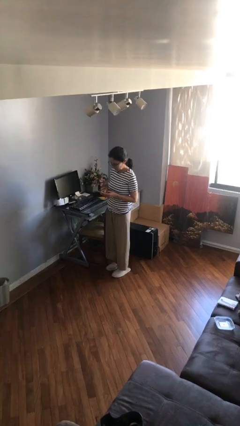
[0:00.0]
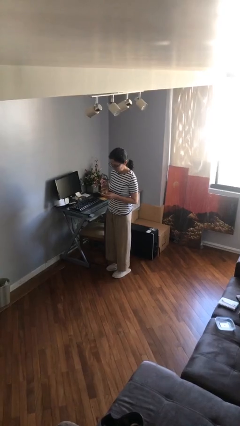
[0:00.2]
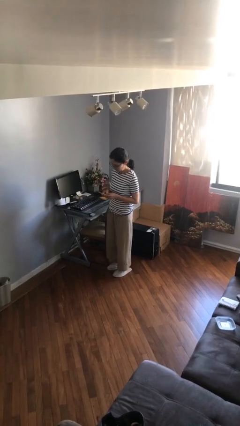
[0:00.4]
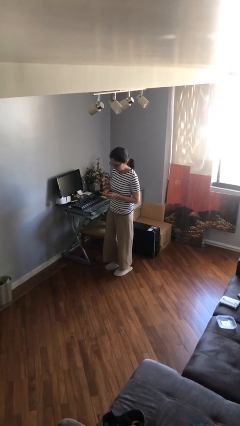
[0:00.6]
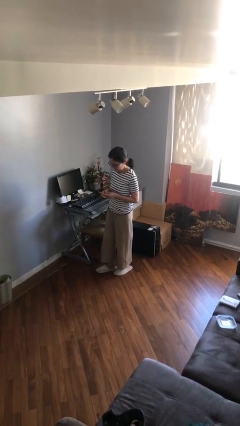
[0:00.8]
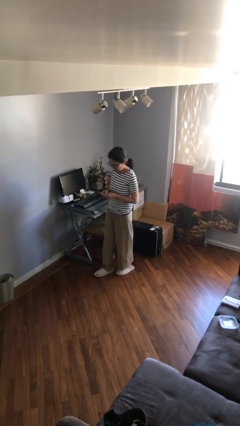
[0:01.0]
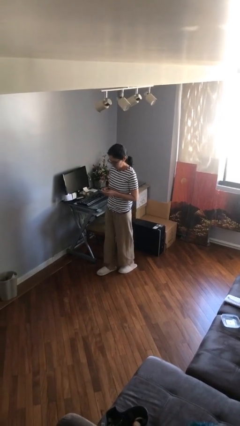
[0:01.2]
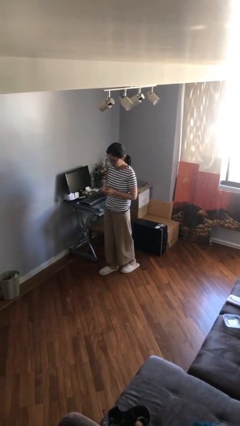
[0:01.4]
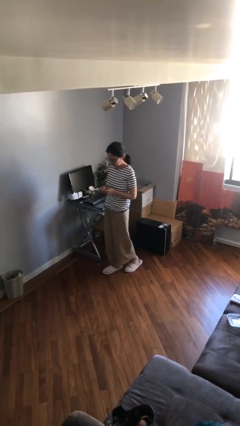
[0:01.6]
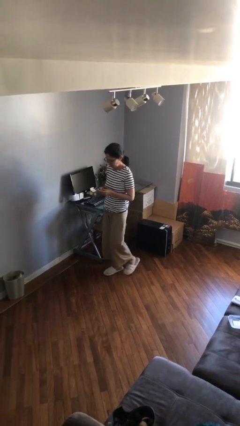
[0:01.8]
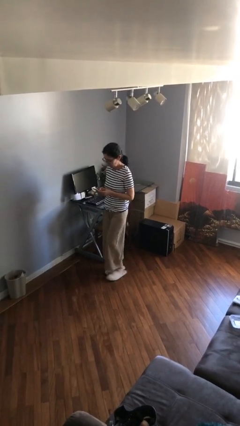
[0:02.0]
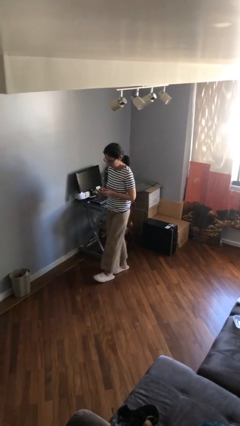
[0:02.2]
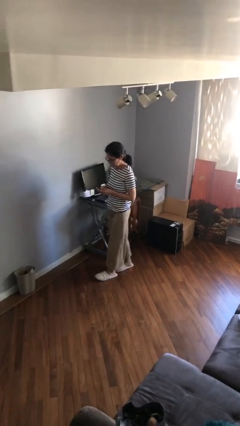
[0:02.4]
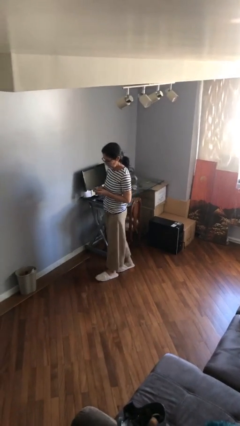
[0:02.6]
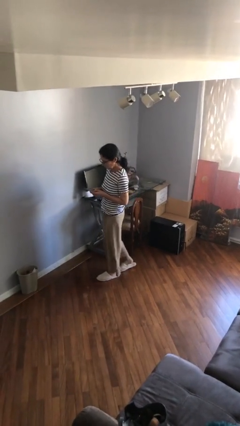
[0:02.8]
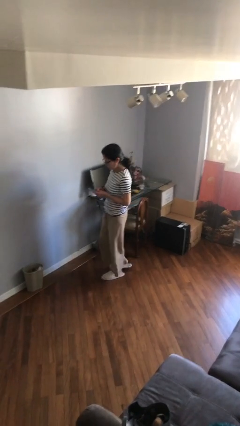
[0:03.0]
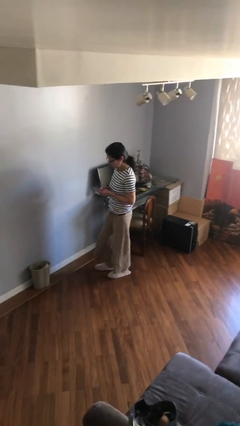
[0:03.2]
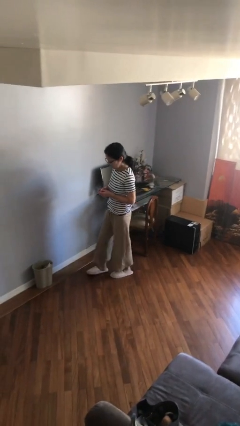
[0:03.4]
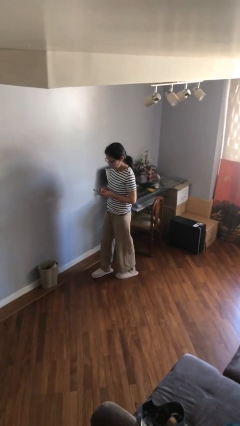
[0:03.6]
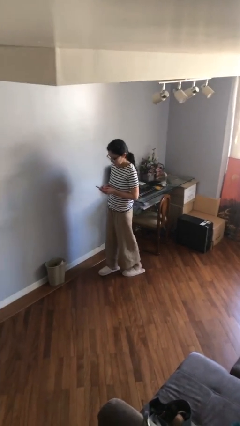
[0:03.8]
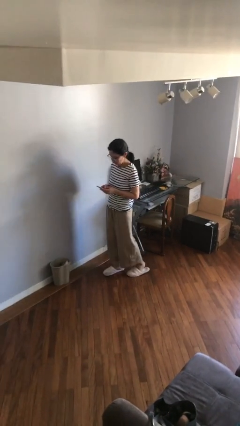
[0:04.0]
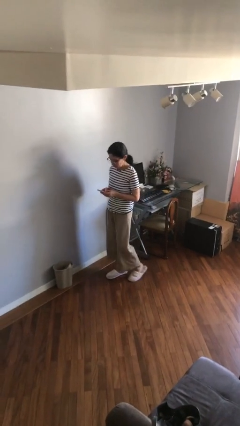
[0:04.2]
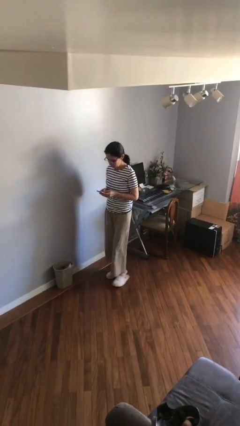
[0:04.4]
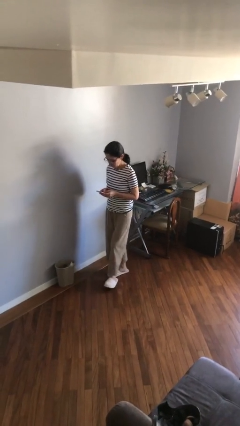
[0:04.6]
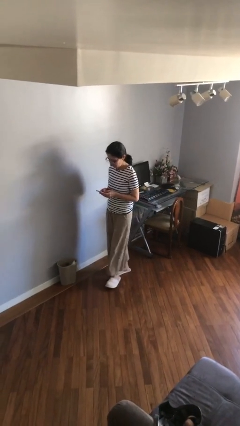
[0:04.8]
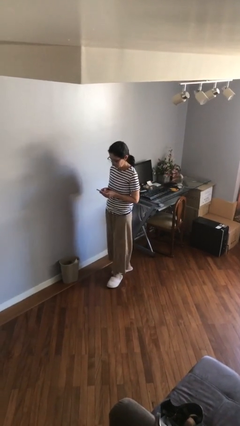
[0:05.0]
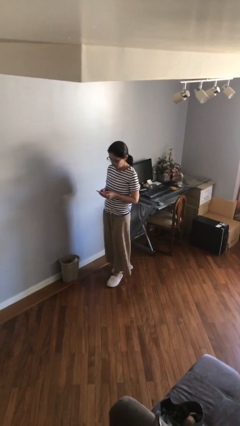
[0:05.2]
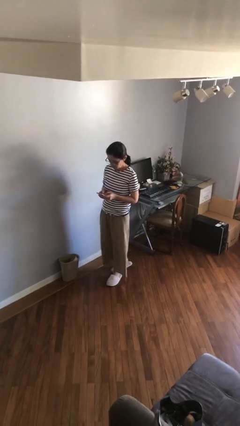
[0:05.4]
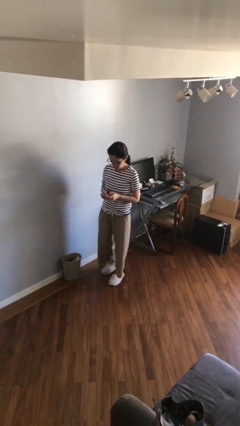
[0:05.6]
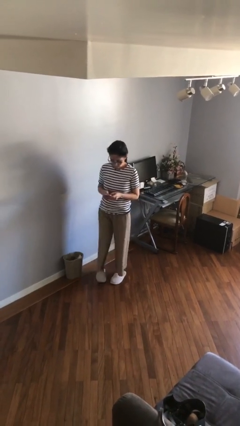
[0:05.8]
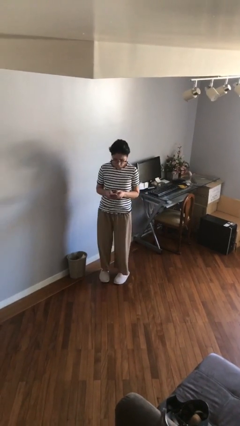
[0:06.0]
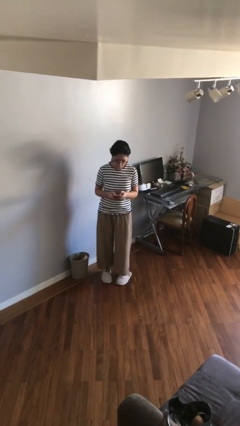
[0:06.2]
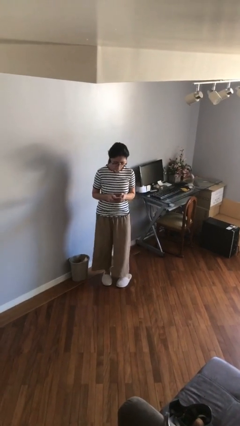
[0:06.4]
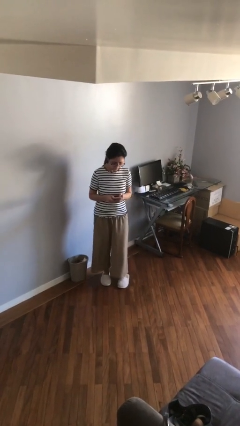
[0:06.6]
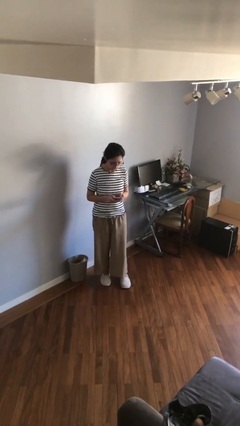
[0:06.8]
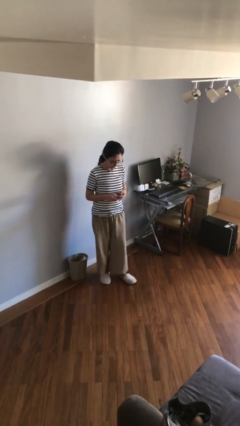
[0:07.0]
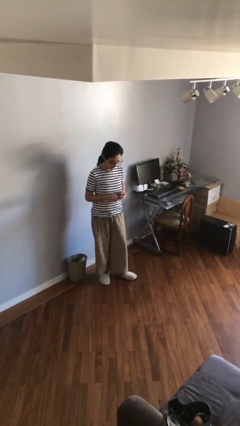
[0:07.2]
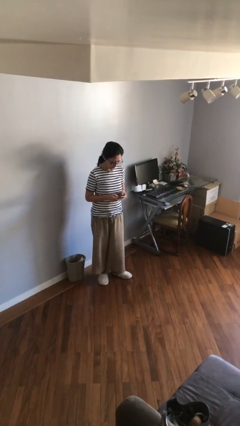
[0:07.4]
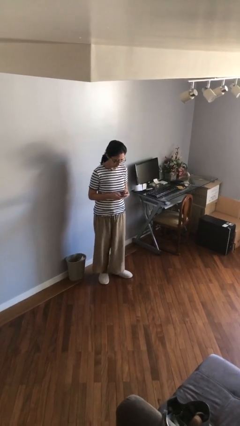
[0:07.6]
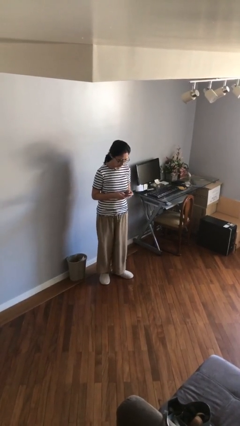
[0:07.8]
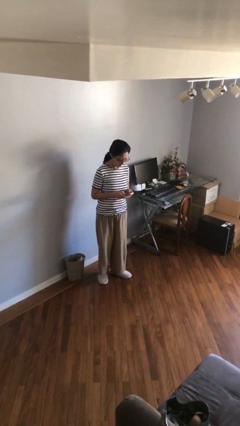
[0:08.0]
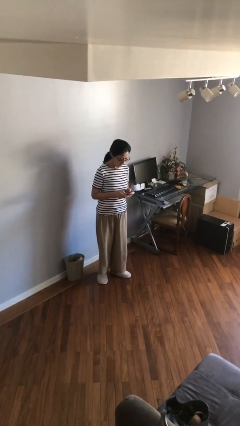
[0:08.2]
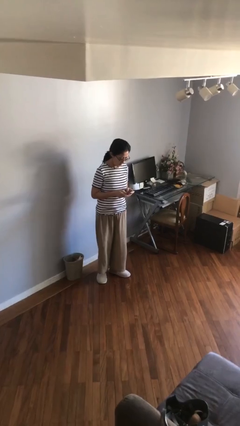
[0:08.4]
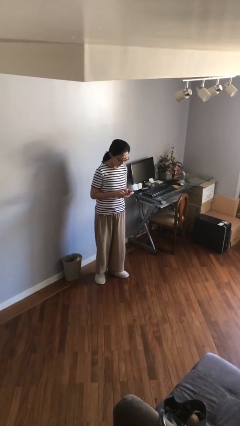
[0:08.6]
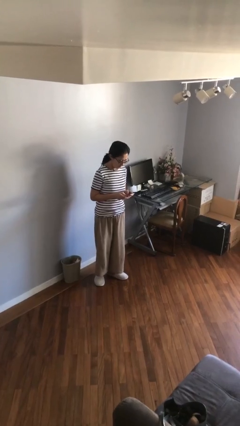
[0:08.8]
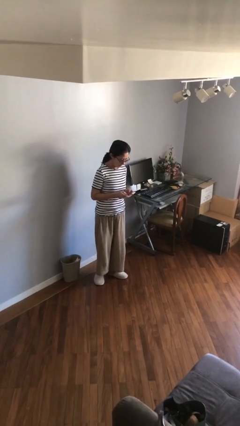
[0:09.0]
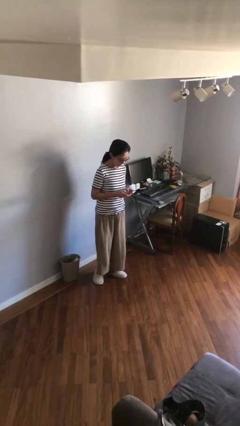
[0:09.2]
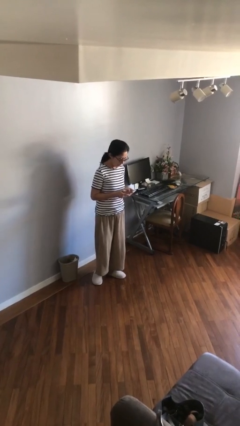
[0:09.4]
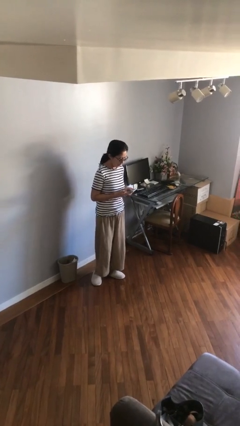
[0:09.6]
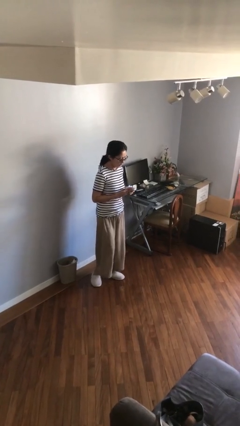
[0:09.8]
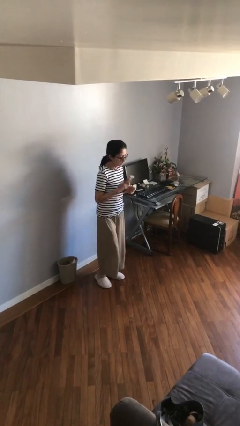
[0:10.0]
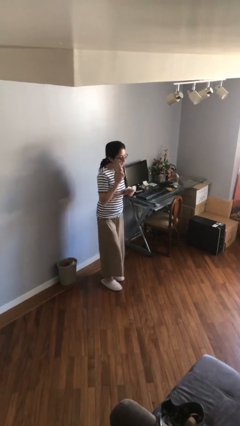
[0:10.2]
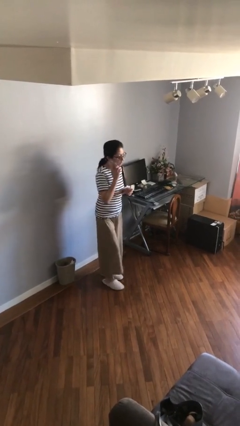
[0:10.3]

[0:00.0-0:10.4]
person texts on phone

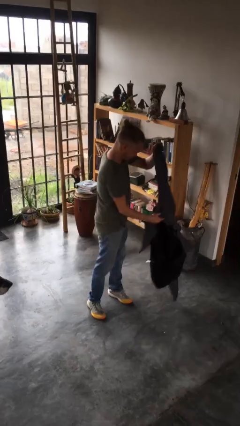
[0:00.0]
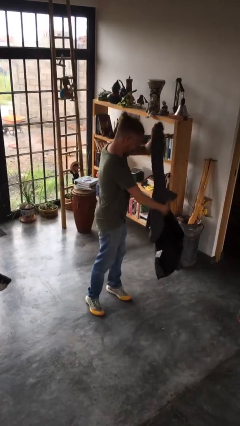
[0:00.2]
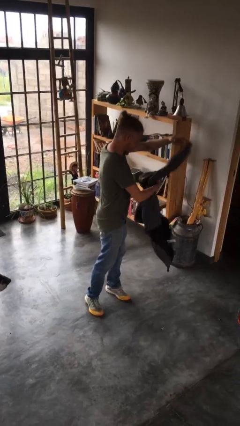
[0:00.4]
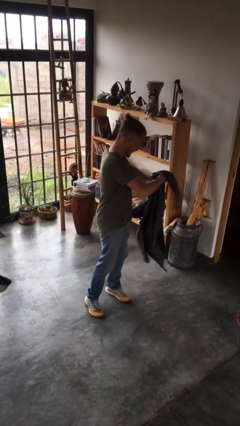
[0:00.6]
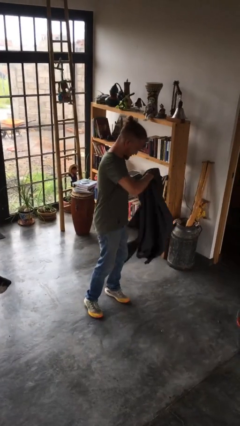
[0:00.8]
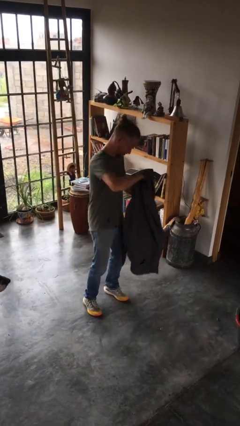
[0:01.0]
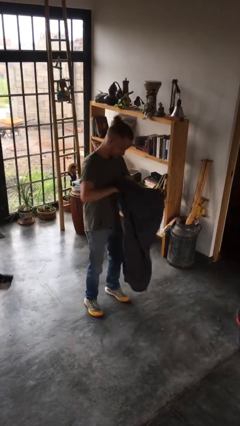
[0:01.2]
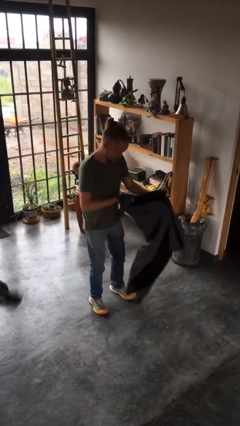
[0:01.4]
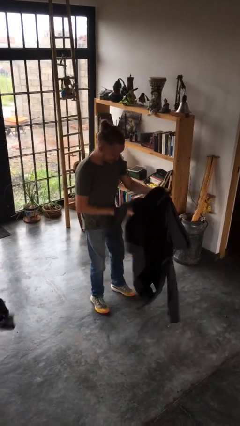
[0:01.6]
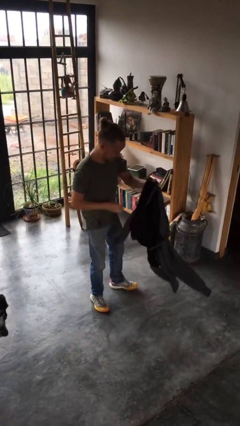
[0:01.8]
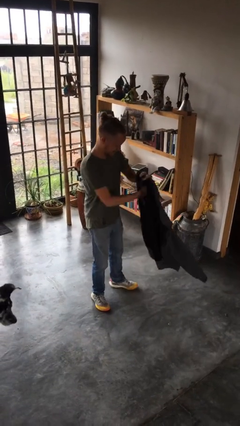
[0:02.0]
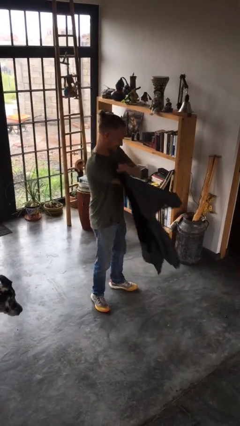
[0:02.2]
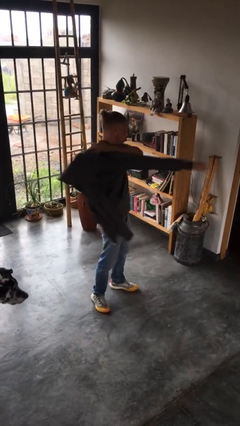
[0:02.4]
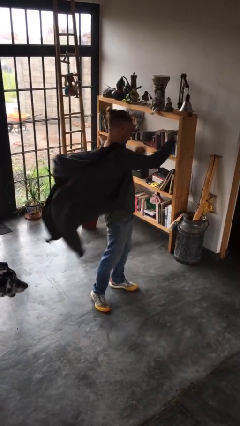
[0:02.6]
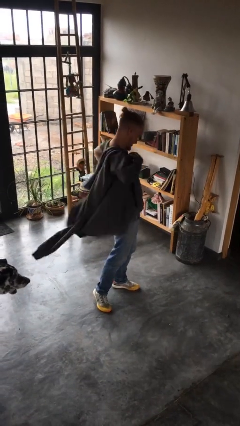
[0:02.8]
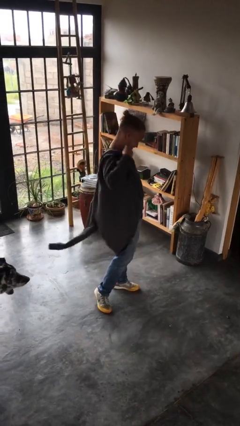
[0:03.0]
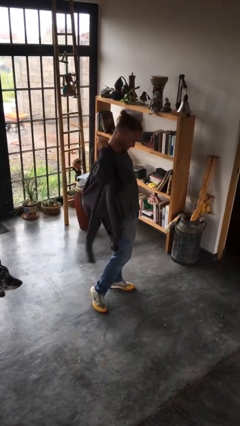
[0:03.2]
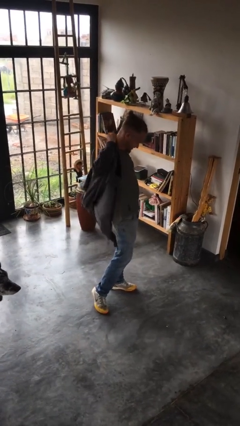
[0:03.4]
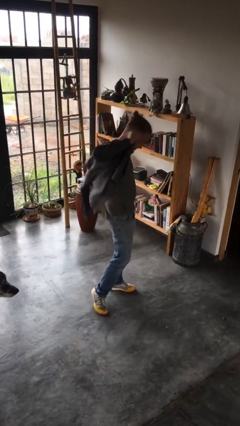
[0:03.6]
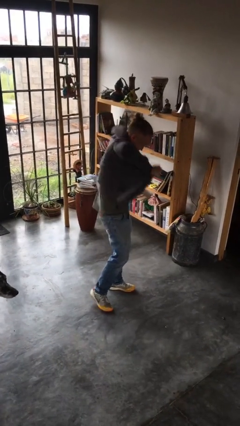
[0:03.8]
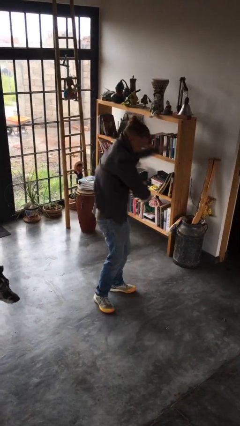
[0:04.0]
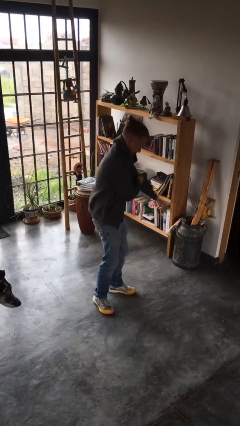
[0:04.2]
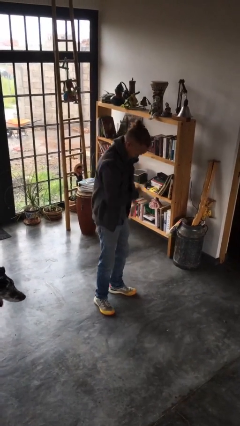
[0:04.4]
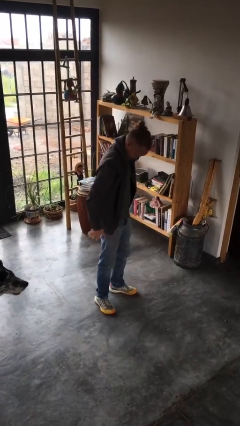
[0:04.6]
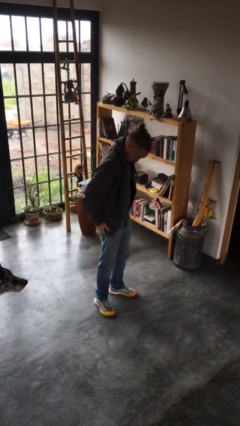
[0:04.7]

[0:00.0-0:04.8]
person puts on jacket

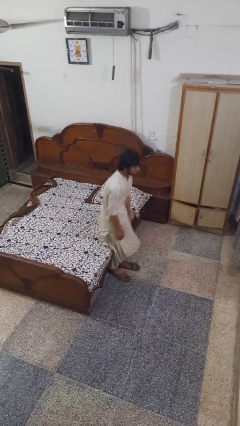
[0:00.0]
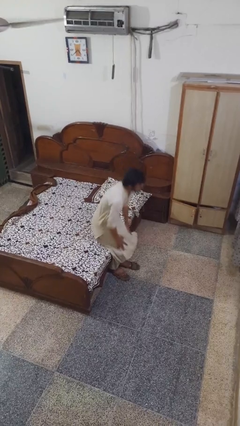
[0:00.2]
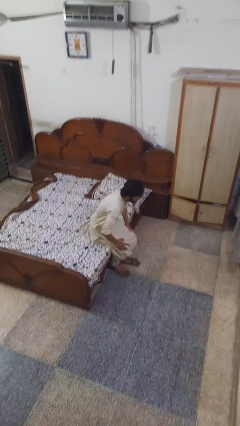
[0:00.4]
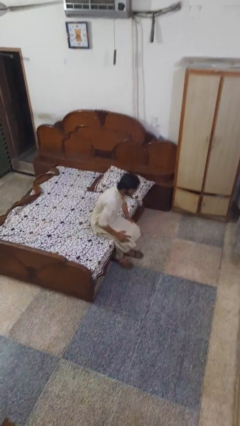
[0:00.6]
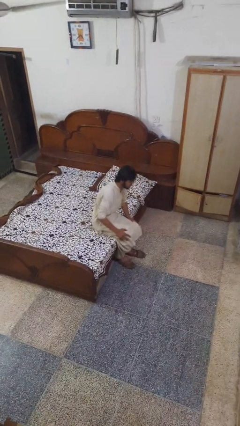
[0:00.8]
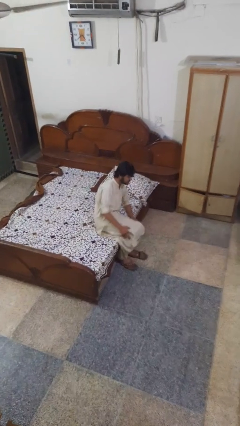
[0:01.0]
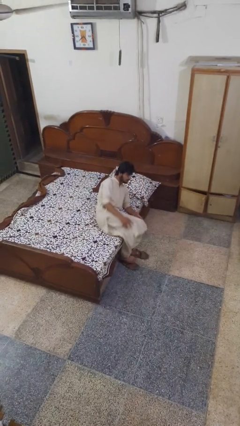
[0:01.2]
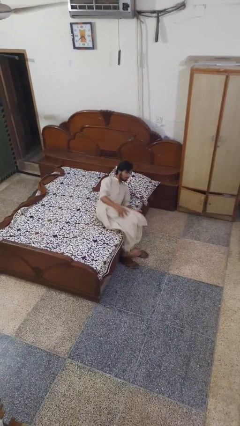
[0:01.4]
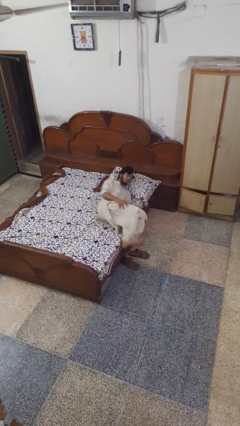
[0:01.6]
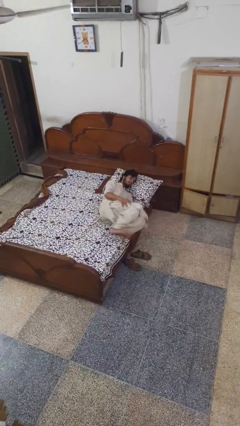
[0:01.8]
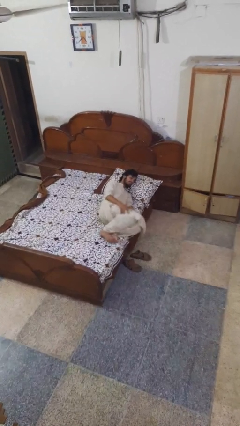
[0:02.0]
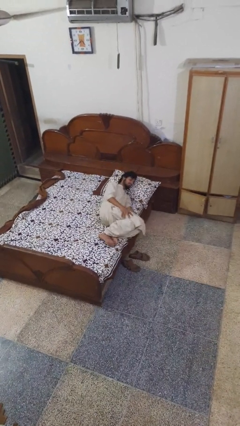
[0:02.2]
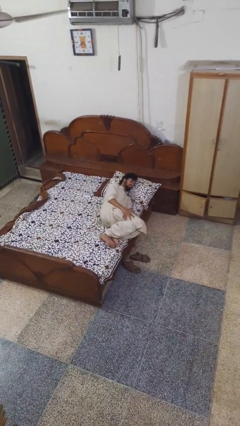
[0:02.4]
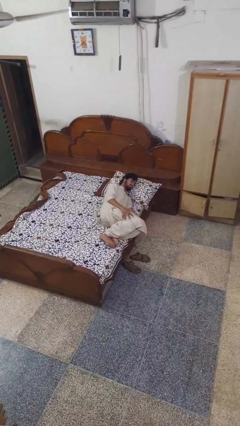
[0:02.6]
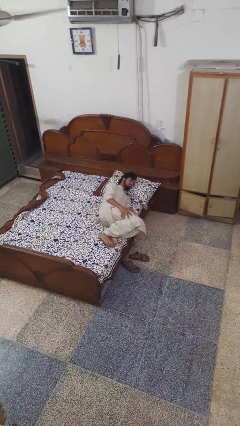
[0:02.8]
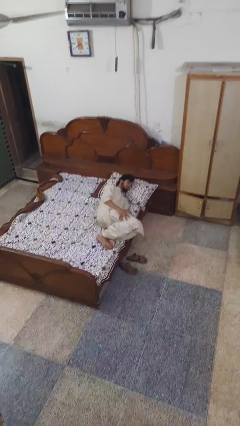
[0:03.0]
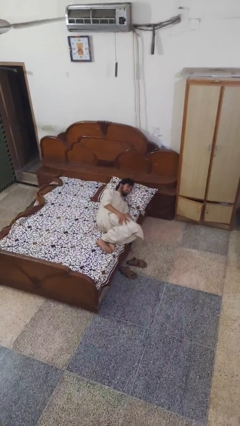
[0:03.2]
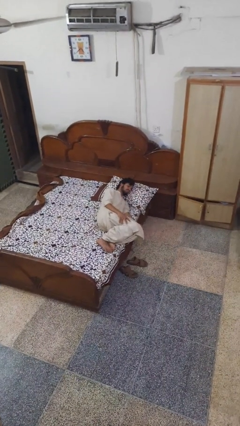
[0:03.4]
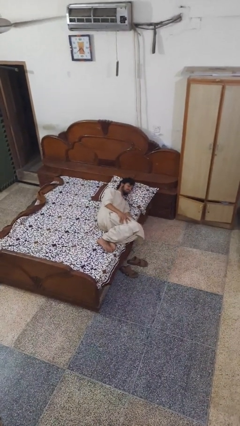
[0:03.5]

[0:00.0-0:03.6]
person lies down on bed
